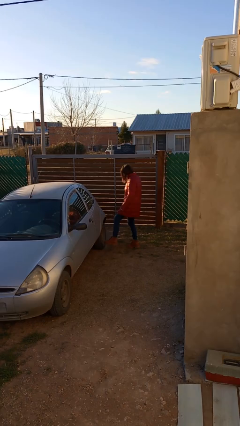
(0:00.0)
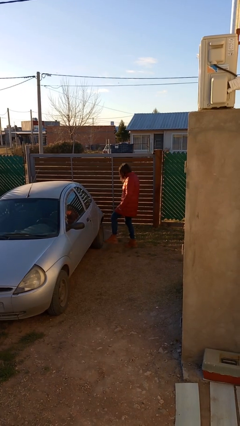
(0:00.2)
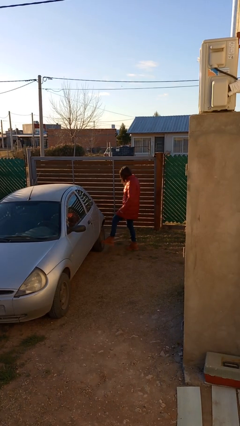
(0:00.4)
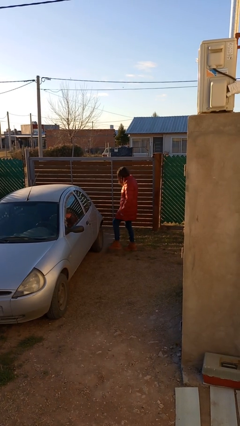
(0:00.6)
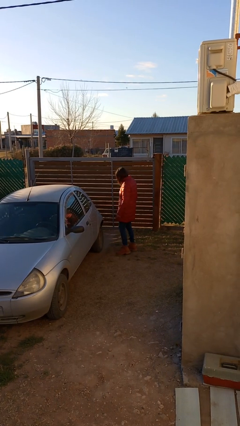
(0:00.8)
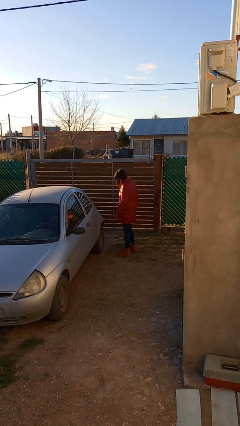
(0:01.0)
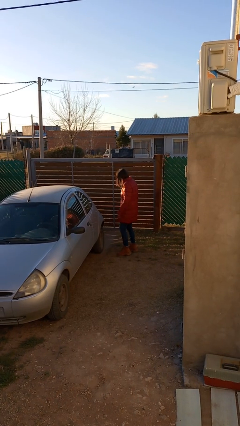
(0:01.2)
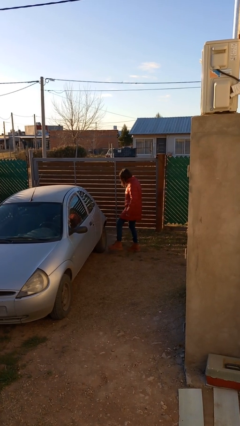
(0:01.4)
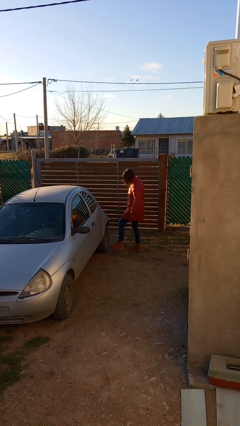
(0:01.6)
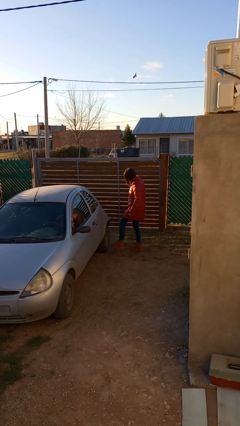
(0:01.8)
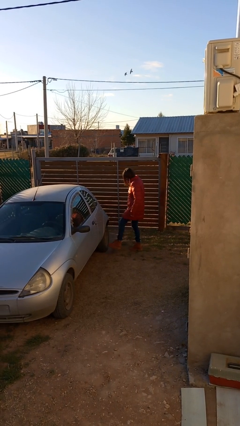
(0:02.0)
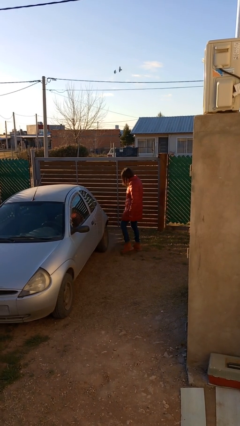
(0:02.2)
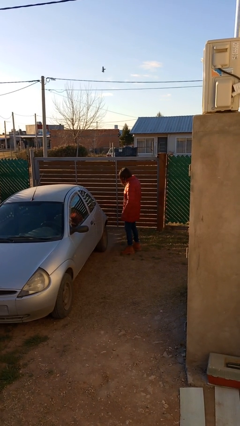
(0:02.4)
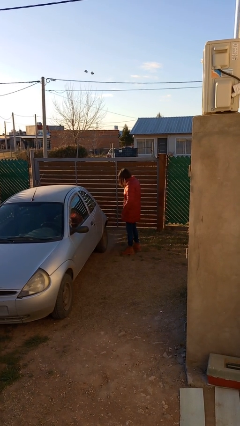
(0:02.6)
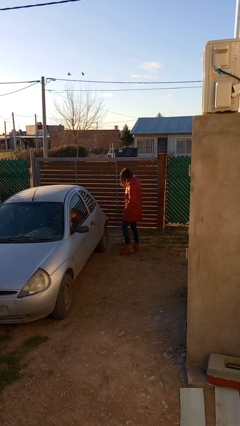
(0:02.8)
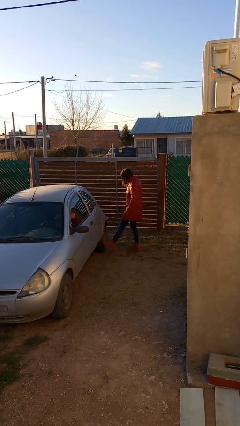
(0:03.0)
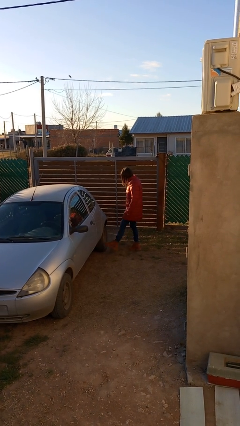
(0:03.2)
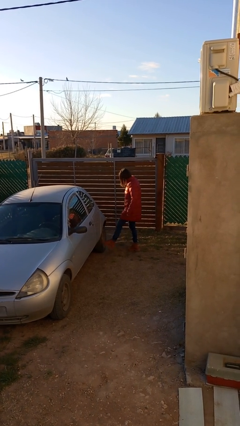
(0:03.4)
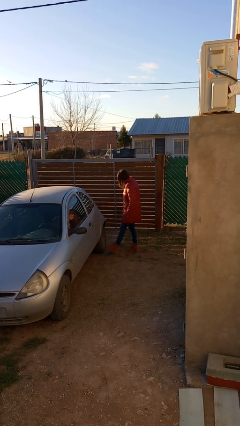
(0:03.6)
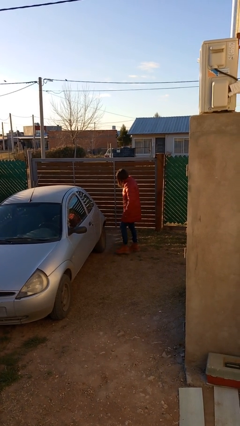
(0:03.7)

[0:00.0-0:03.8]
person kicks car tires

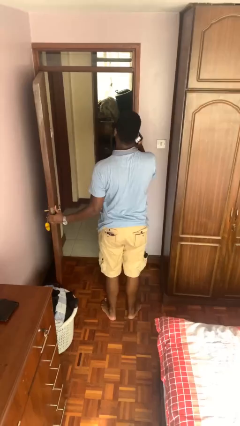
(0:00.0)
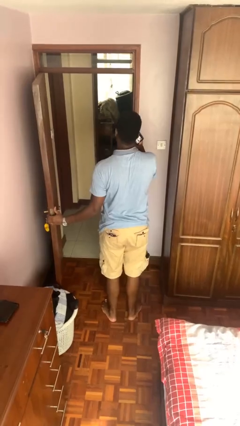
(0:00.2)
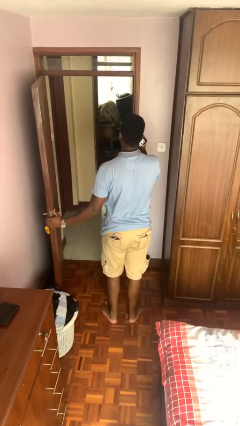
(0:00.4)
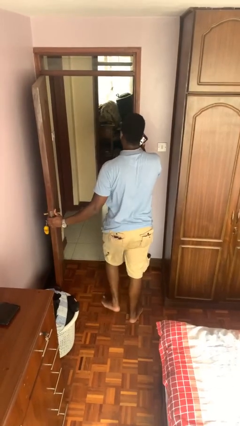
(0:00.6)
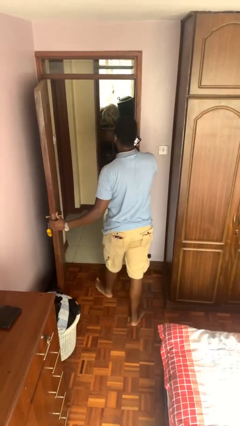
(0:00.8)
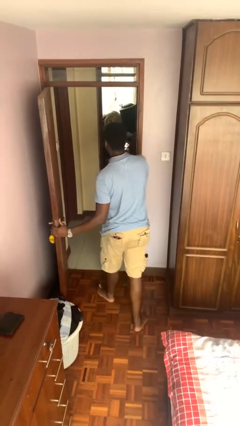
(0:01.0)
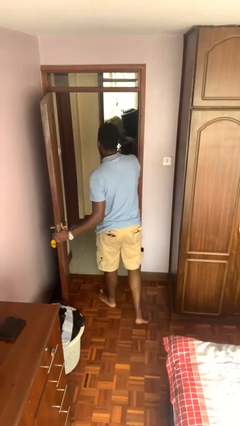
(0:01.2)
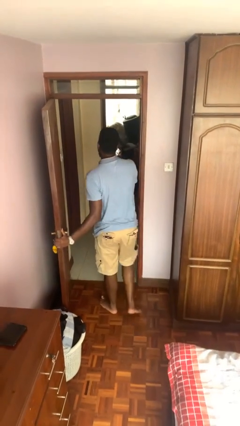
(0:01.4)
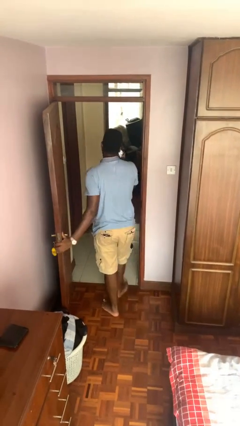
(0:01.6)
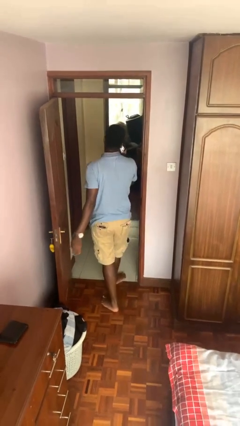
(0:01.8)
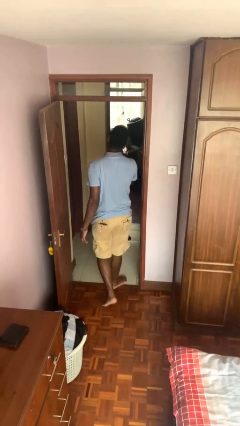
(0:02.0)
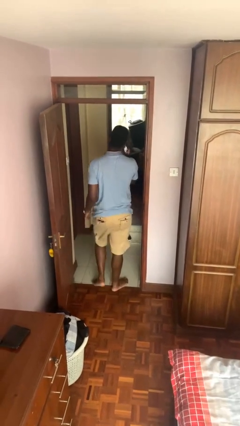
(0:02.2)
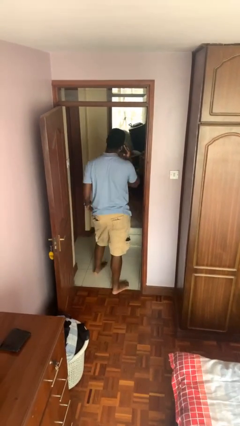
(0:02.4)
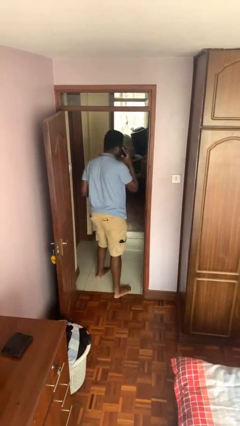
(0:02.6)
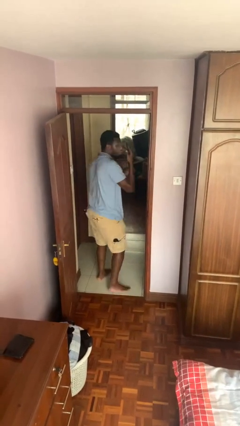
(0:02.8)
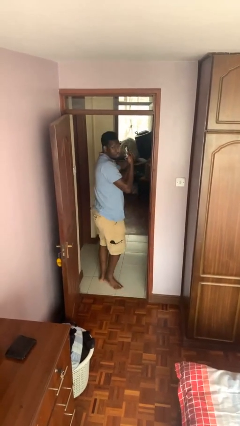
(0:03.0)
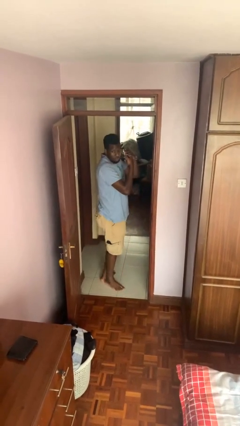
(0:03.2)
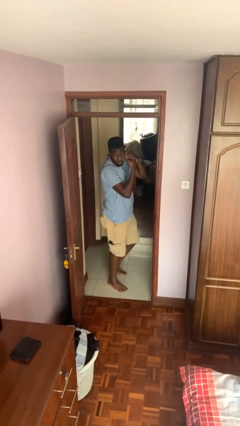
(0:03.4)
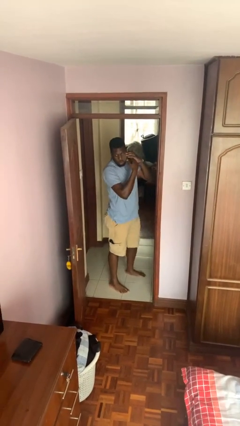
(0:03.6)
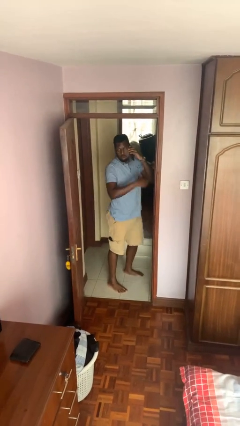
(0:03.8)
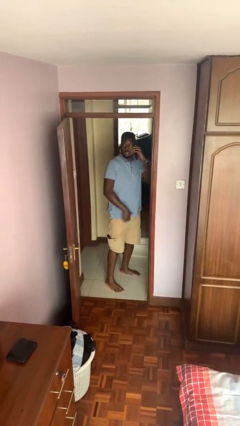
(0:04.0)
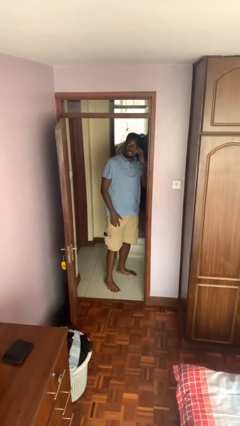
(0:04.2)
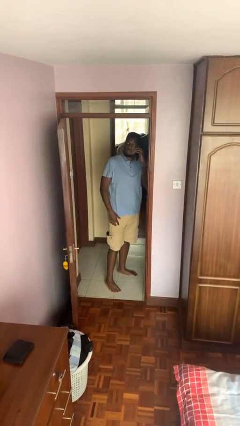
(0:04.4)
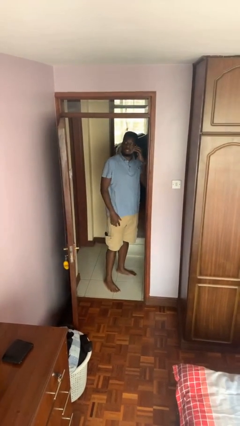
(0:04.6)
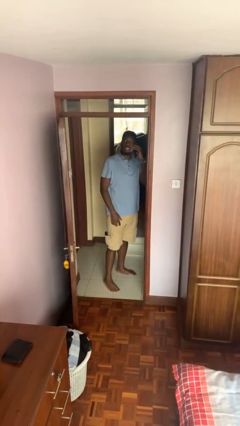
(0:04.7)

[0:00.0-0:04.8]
person exits scene through structure

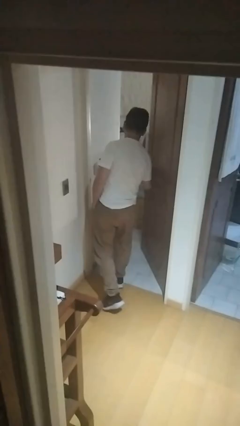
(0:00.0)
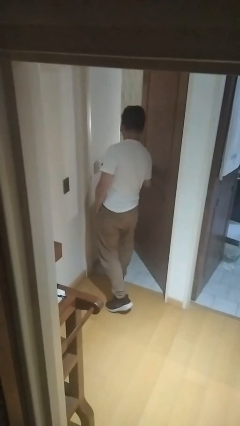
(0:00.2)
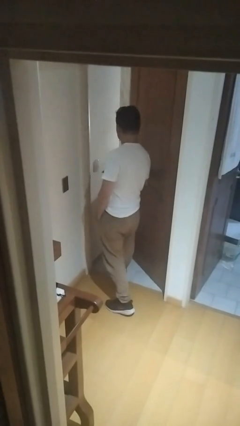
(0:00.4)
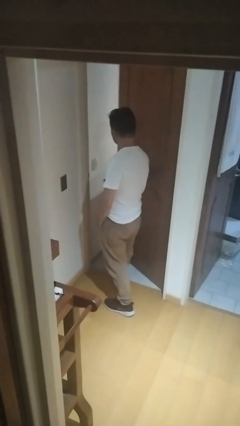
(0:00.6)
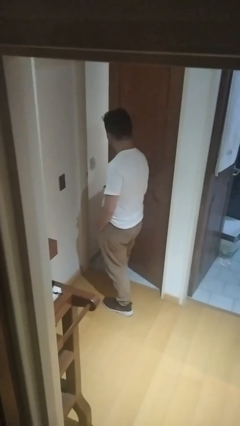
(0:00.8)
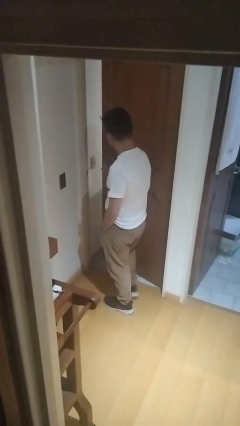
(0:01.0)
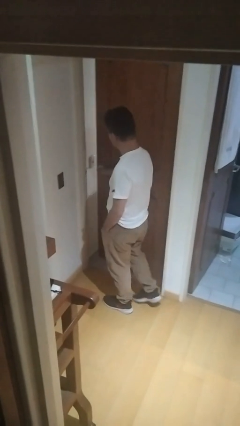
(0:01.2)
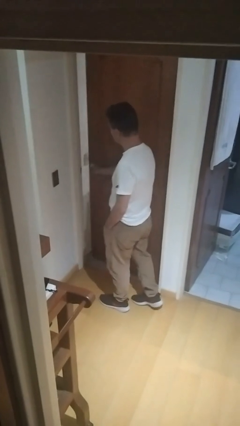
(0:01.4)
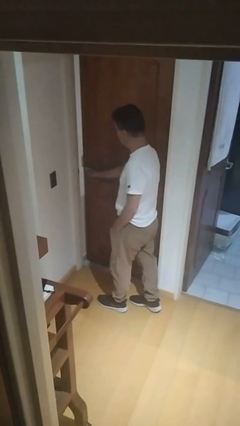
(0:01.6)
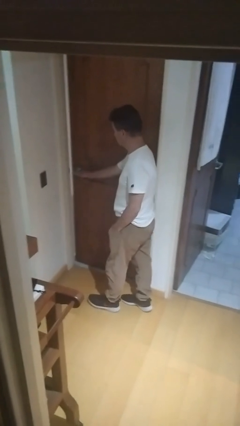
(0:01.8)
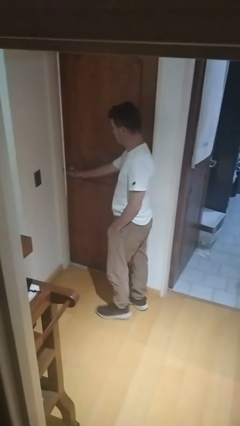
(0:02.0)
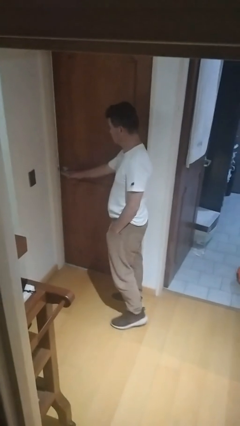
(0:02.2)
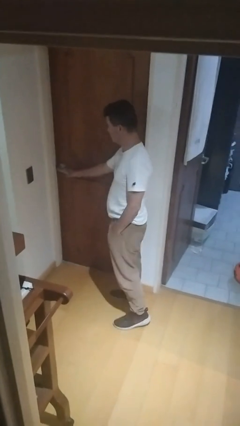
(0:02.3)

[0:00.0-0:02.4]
person closes facility door

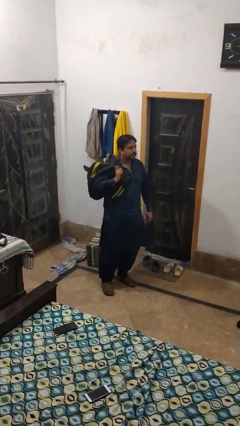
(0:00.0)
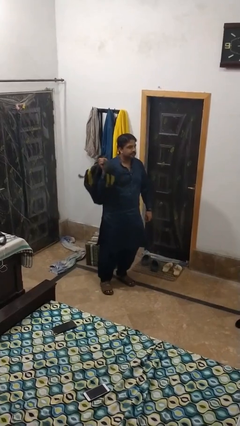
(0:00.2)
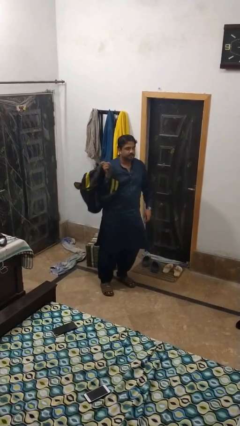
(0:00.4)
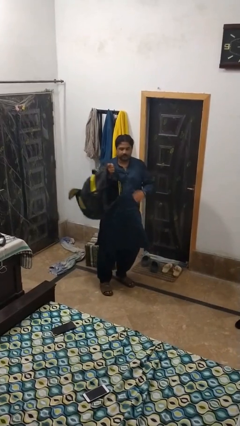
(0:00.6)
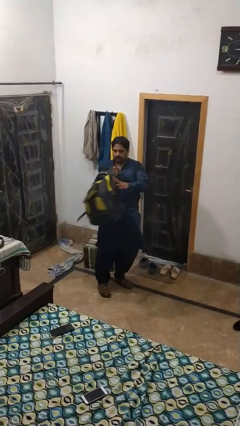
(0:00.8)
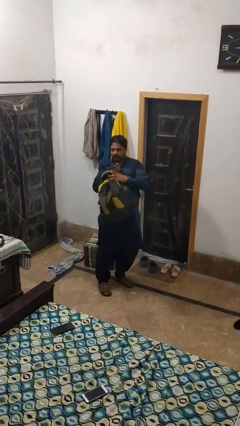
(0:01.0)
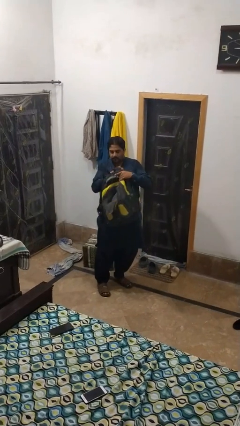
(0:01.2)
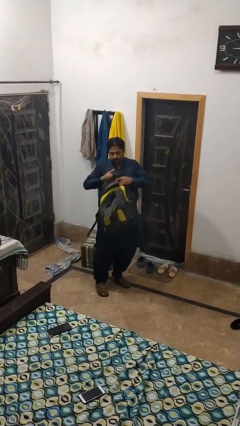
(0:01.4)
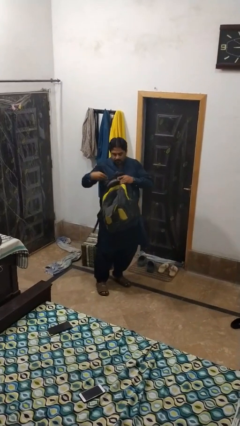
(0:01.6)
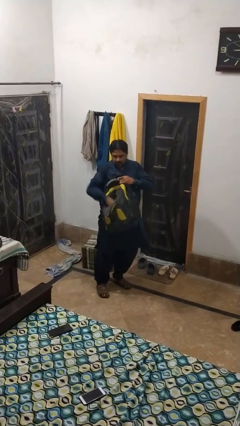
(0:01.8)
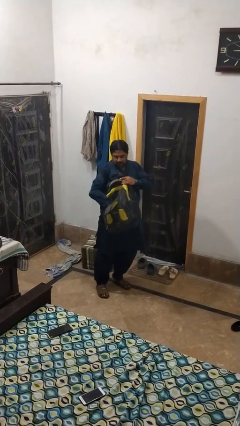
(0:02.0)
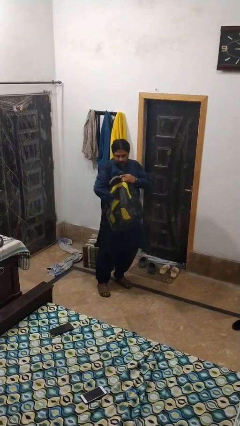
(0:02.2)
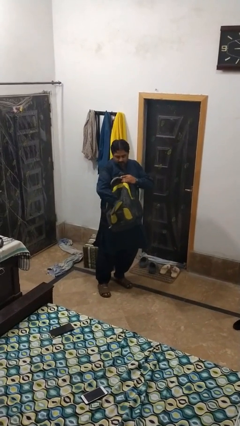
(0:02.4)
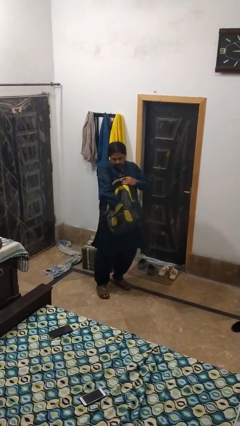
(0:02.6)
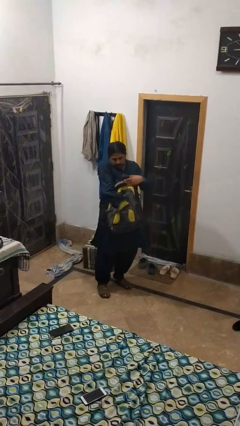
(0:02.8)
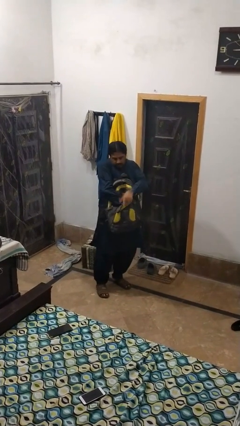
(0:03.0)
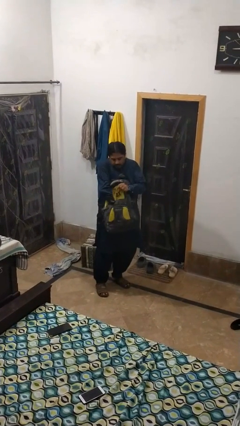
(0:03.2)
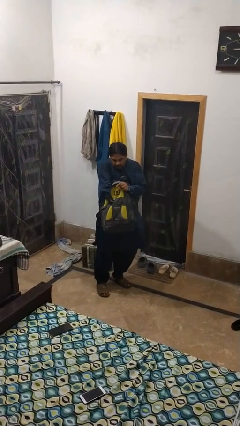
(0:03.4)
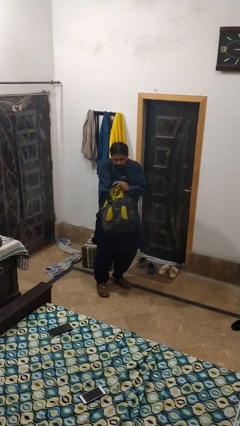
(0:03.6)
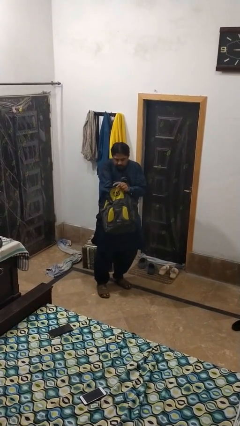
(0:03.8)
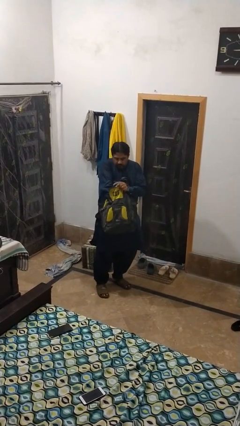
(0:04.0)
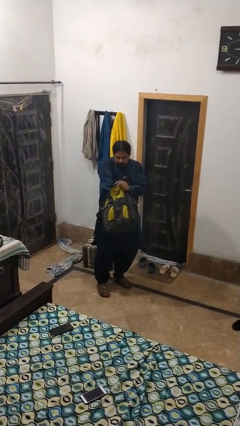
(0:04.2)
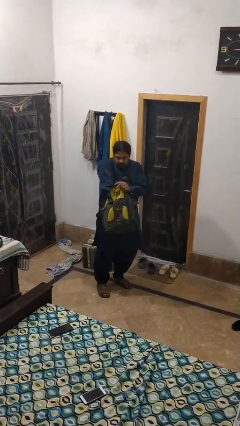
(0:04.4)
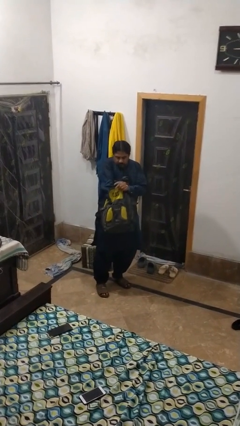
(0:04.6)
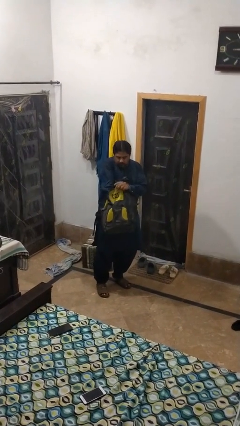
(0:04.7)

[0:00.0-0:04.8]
person searches in backpack

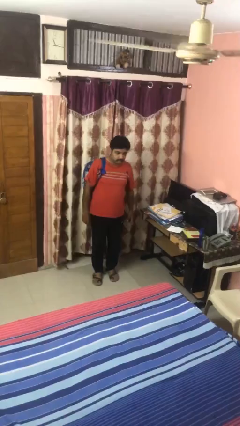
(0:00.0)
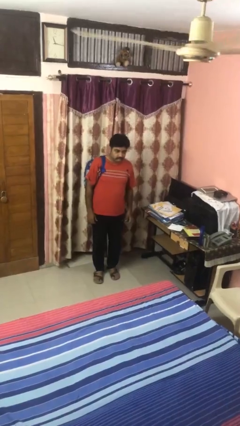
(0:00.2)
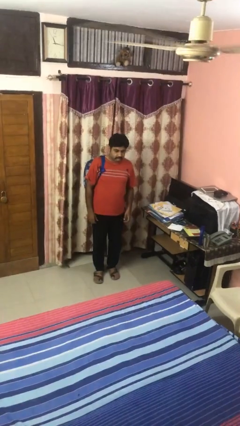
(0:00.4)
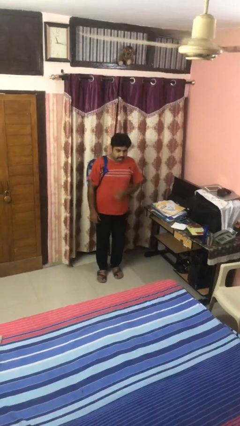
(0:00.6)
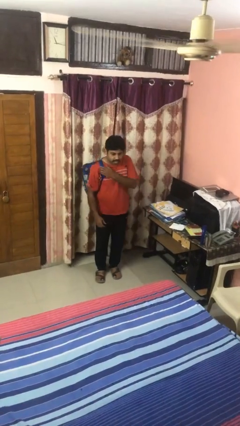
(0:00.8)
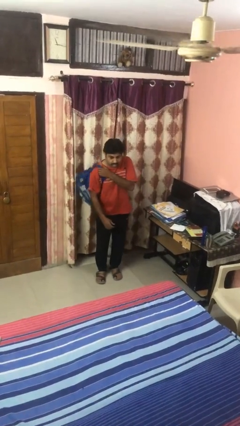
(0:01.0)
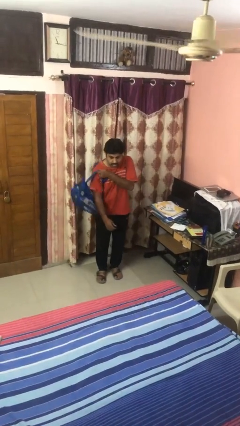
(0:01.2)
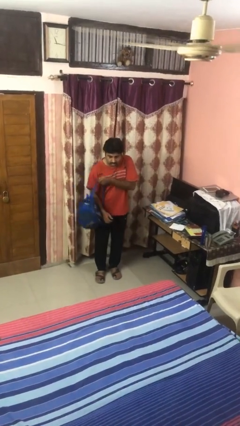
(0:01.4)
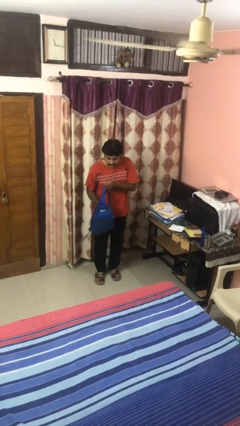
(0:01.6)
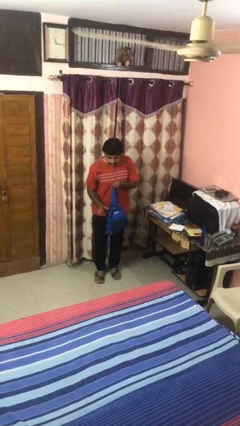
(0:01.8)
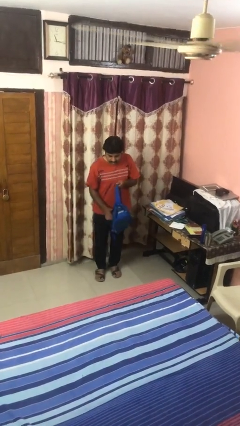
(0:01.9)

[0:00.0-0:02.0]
person takes off backpack
